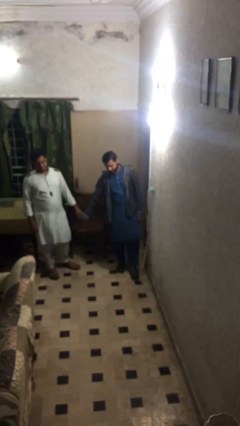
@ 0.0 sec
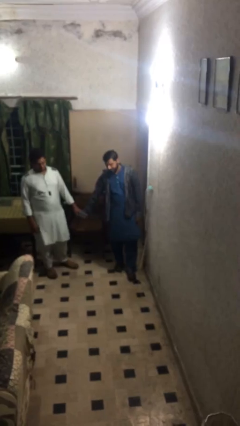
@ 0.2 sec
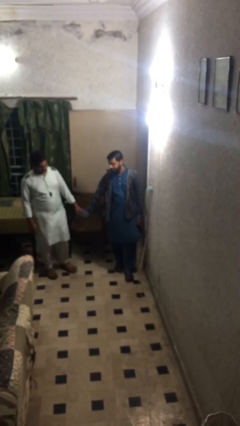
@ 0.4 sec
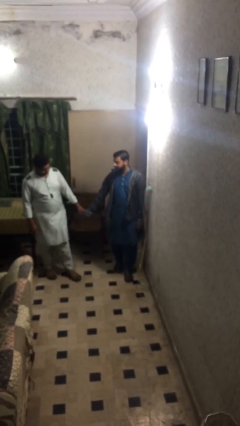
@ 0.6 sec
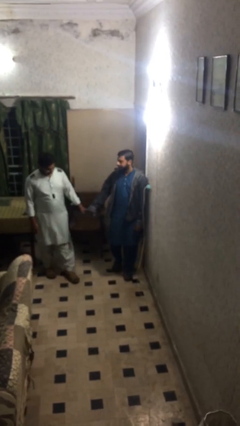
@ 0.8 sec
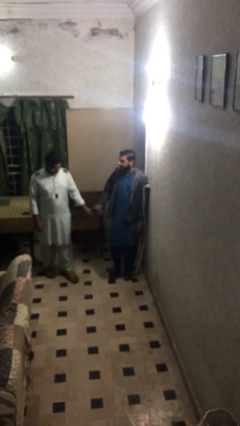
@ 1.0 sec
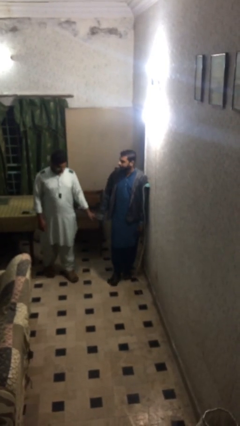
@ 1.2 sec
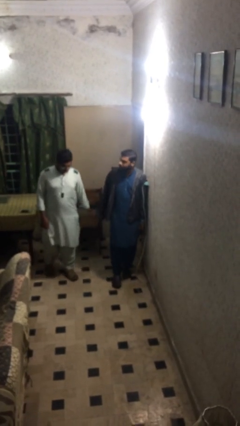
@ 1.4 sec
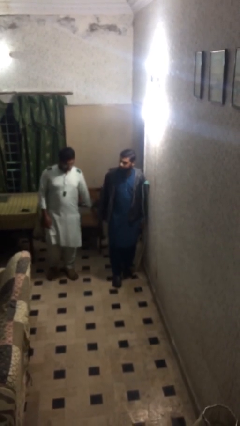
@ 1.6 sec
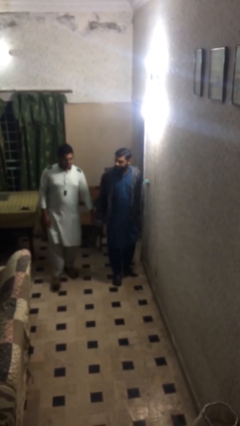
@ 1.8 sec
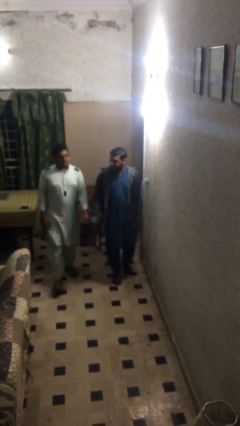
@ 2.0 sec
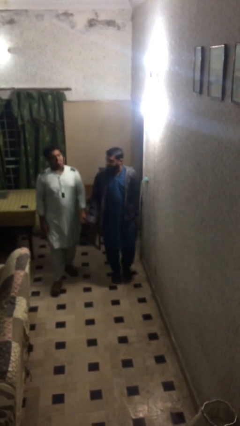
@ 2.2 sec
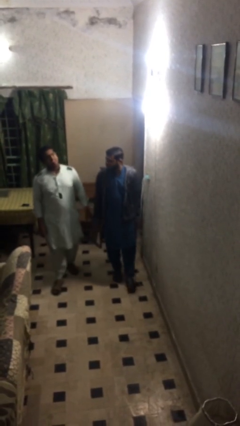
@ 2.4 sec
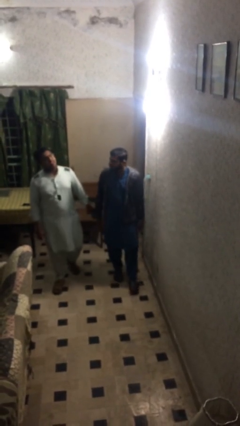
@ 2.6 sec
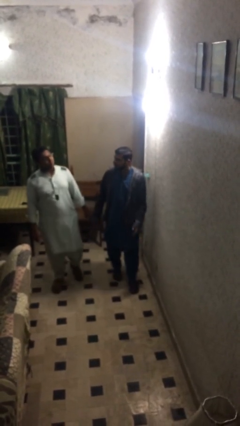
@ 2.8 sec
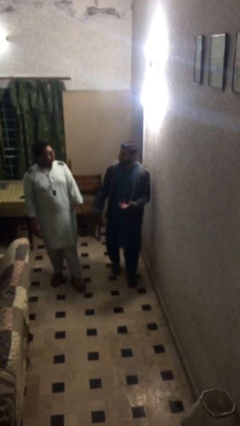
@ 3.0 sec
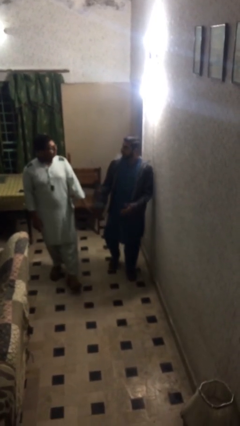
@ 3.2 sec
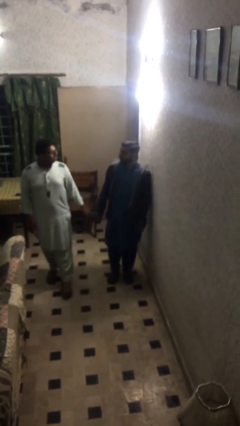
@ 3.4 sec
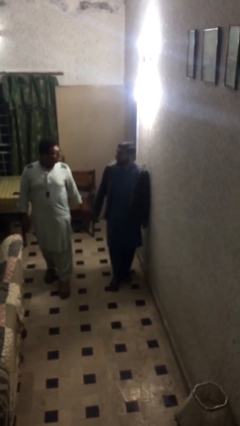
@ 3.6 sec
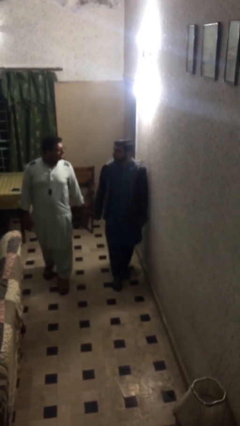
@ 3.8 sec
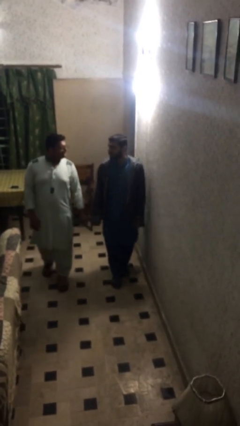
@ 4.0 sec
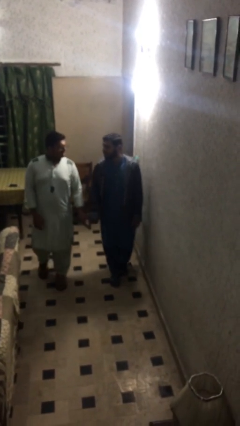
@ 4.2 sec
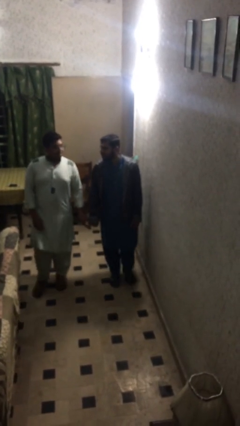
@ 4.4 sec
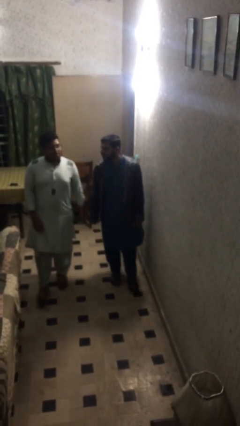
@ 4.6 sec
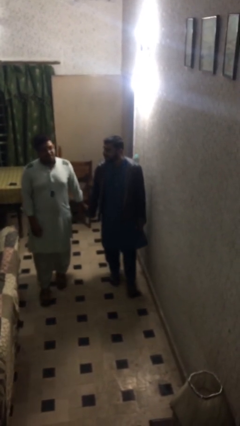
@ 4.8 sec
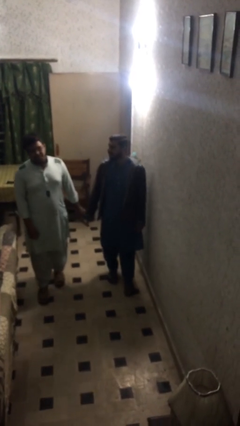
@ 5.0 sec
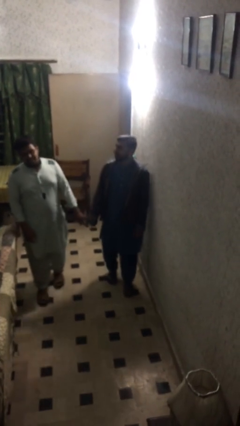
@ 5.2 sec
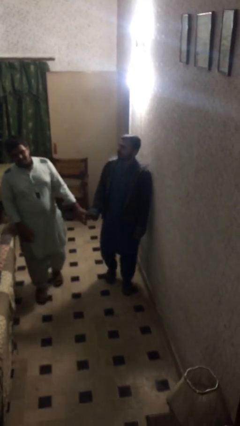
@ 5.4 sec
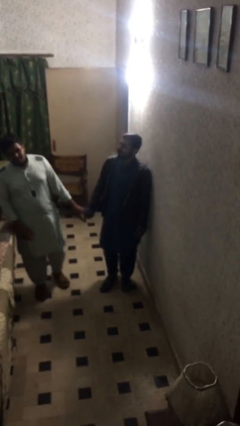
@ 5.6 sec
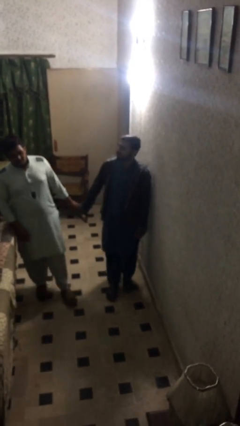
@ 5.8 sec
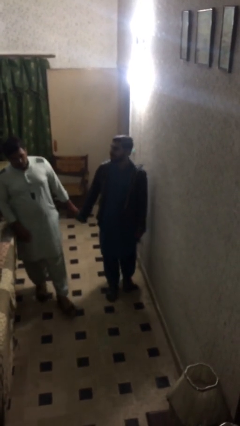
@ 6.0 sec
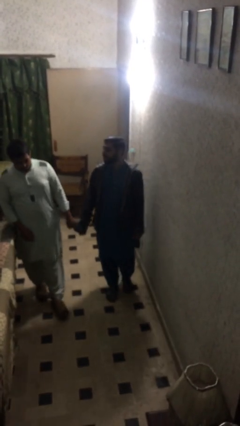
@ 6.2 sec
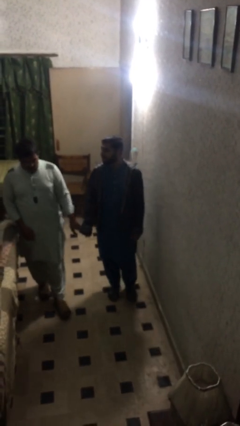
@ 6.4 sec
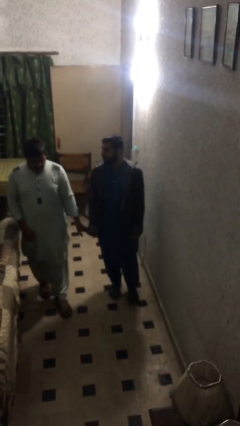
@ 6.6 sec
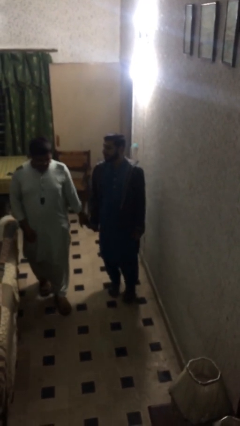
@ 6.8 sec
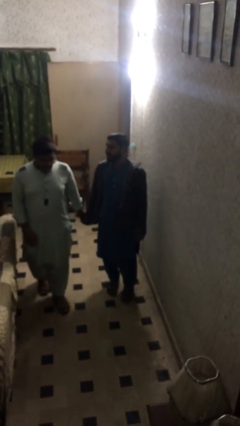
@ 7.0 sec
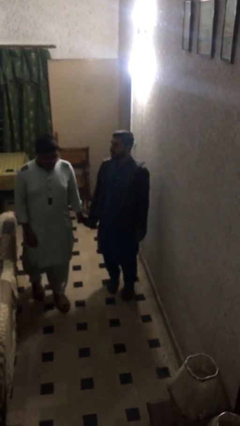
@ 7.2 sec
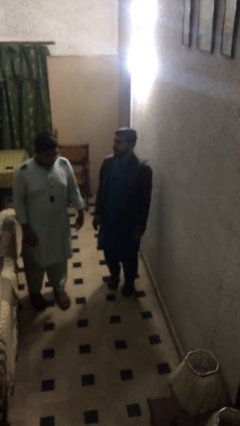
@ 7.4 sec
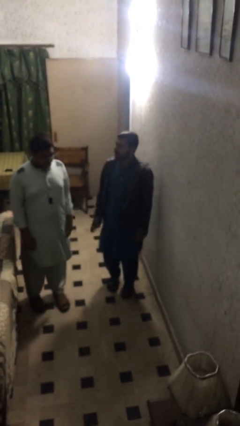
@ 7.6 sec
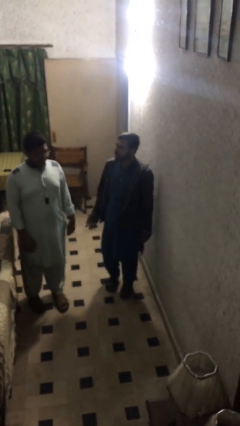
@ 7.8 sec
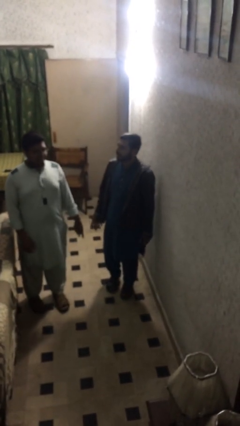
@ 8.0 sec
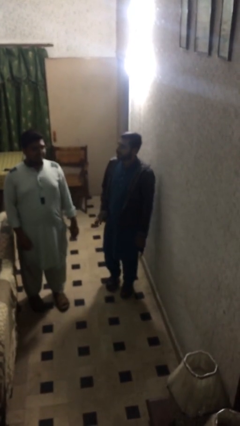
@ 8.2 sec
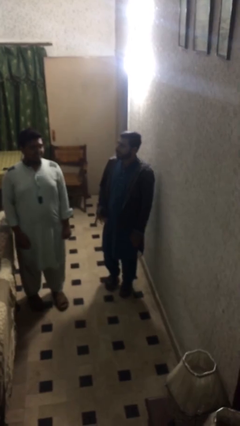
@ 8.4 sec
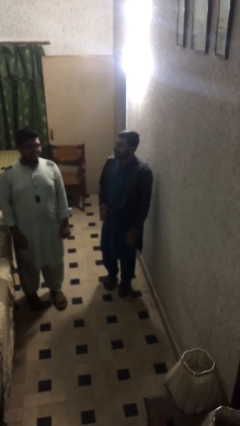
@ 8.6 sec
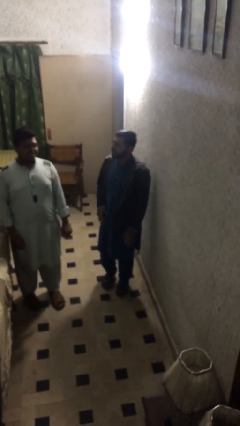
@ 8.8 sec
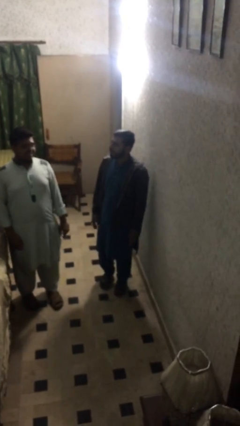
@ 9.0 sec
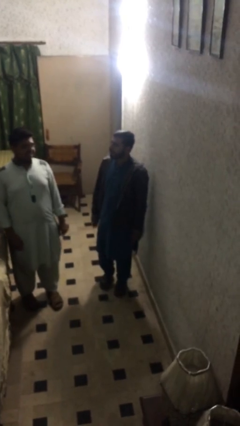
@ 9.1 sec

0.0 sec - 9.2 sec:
person holds hand

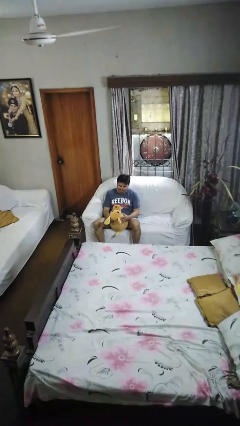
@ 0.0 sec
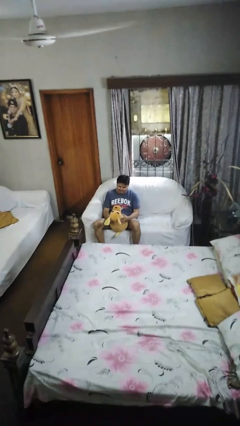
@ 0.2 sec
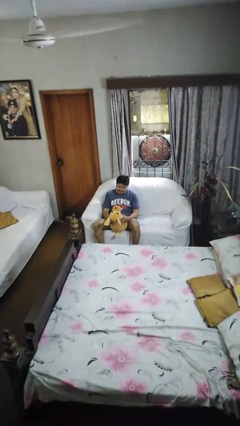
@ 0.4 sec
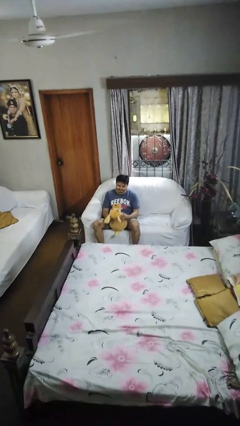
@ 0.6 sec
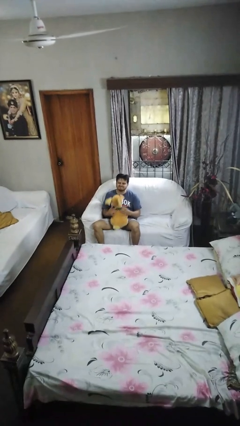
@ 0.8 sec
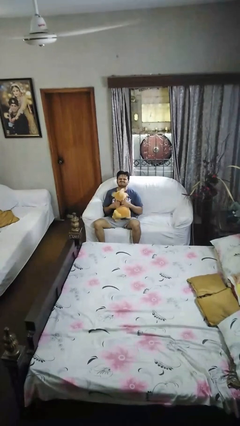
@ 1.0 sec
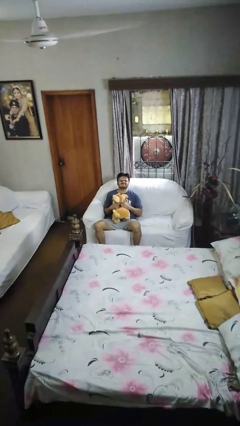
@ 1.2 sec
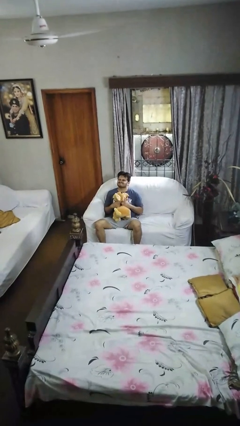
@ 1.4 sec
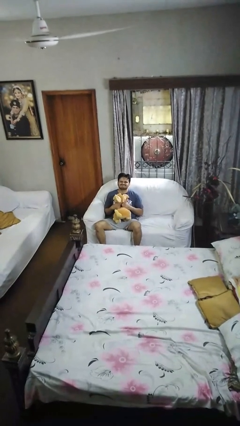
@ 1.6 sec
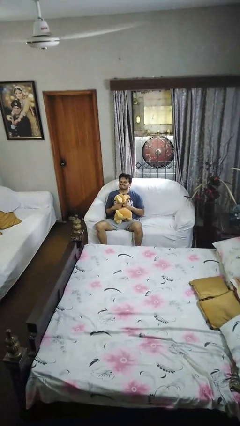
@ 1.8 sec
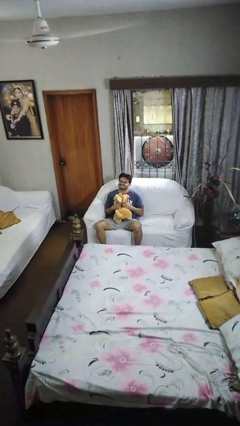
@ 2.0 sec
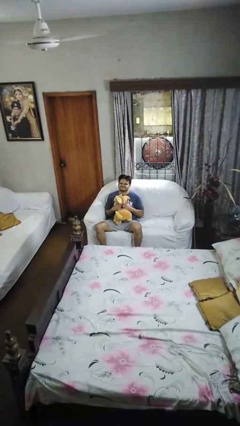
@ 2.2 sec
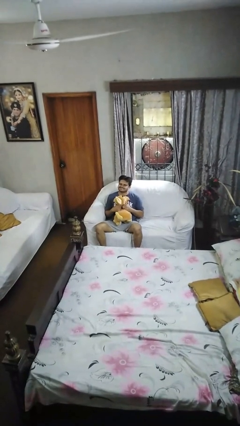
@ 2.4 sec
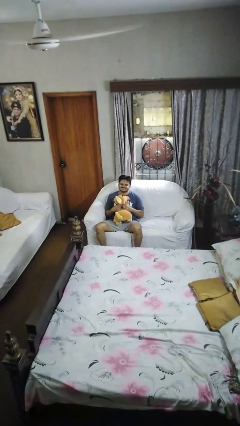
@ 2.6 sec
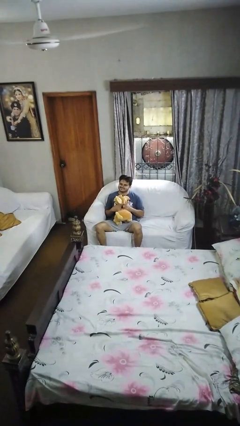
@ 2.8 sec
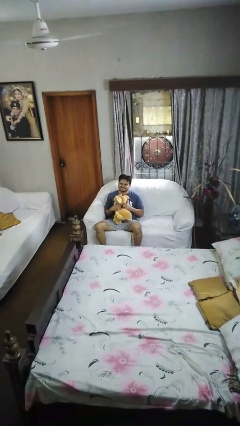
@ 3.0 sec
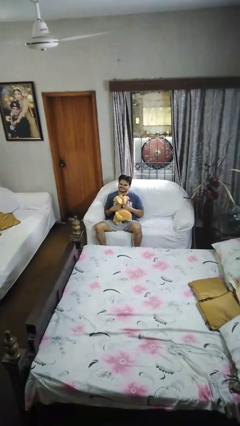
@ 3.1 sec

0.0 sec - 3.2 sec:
person hugs stuffed animal

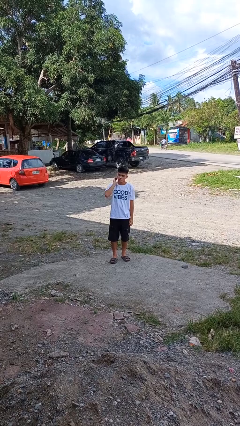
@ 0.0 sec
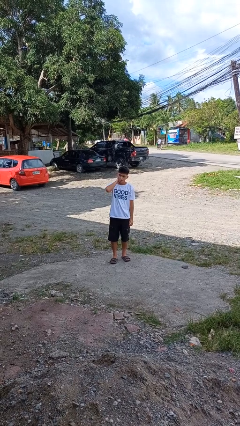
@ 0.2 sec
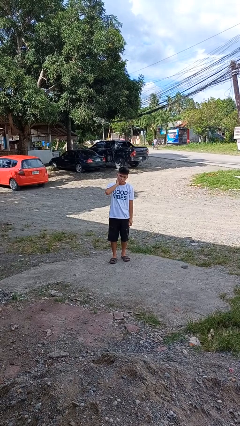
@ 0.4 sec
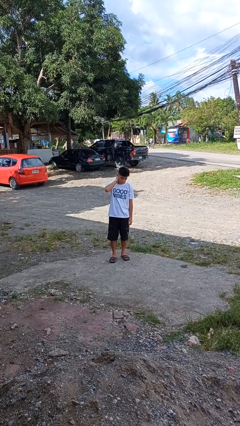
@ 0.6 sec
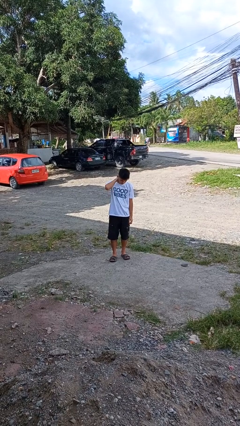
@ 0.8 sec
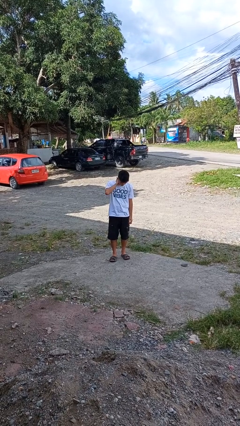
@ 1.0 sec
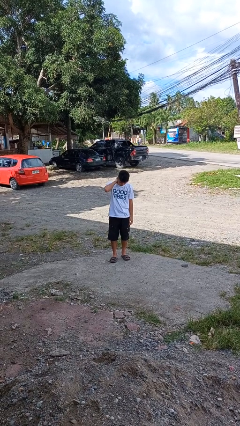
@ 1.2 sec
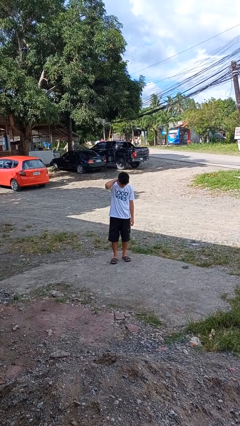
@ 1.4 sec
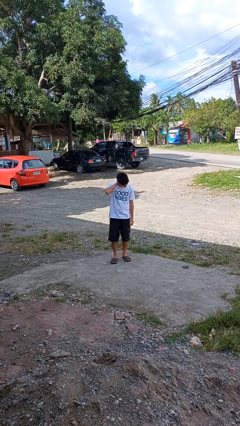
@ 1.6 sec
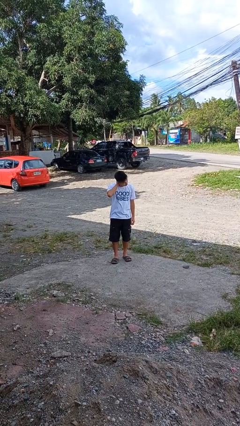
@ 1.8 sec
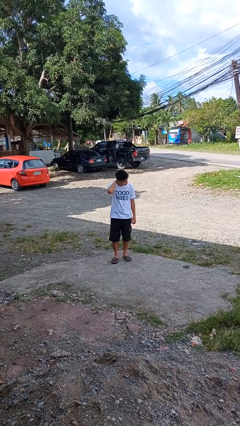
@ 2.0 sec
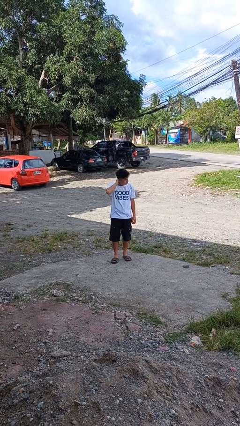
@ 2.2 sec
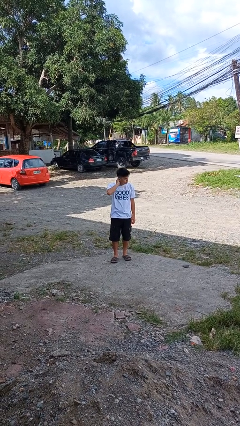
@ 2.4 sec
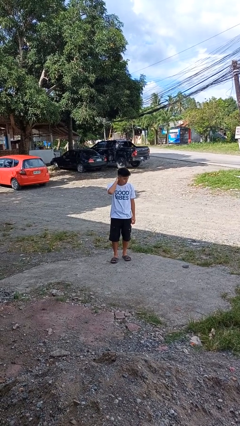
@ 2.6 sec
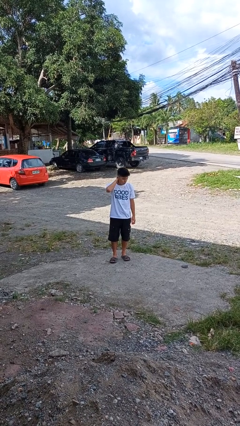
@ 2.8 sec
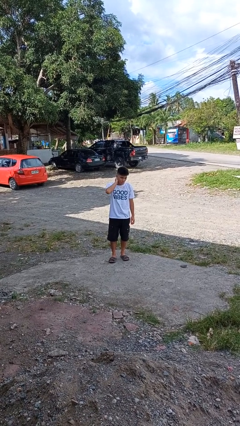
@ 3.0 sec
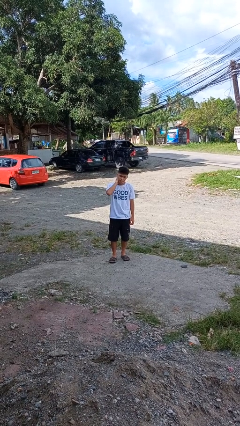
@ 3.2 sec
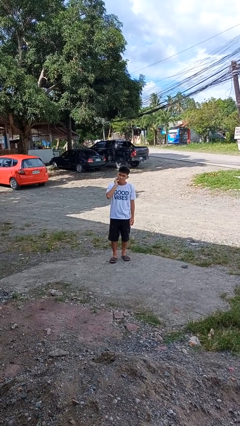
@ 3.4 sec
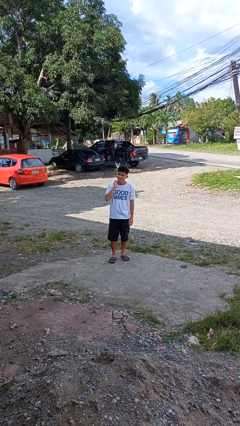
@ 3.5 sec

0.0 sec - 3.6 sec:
person rubs neck

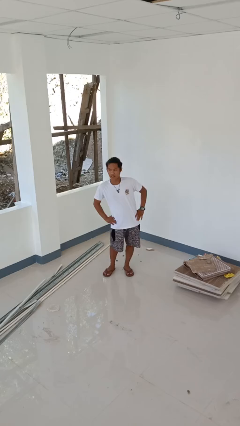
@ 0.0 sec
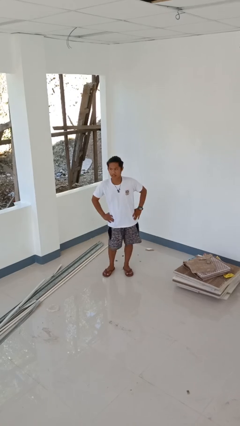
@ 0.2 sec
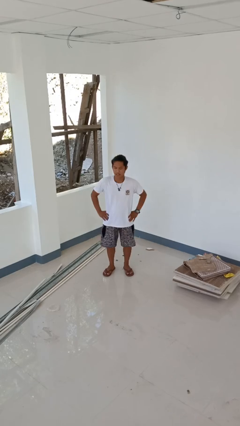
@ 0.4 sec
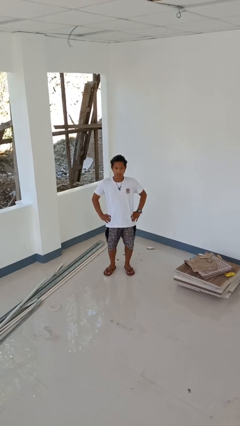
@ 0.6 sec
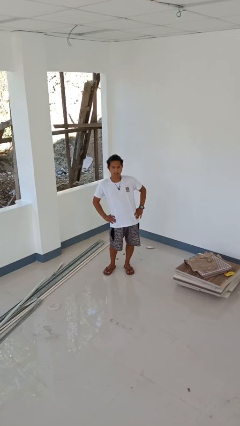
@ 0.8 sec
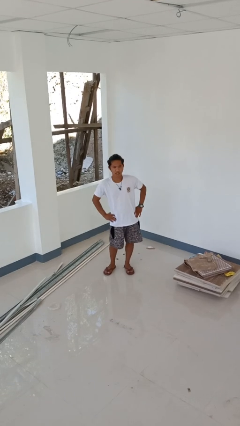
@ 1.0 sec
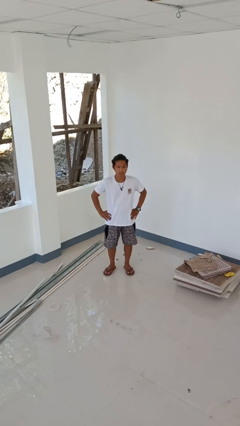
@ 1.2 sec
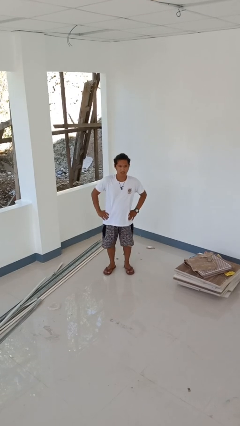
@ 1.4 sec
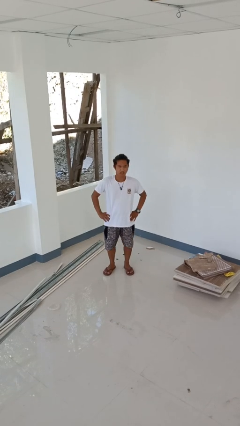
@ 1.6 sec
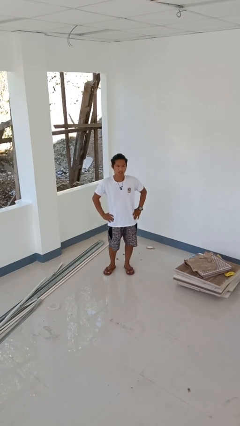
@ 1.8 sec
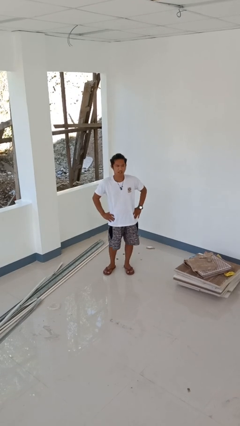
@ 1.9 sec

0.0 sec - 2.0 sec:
person wiggles hips
